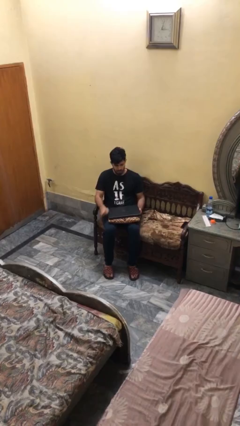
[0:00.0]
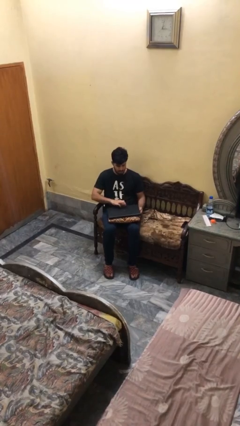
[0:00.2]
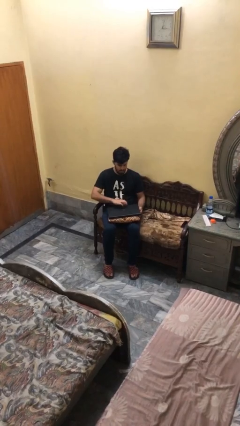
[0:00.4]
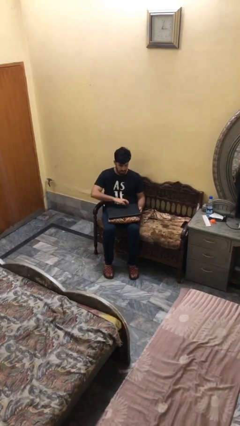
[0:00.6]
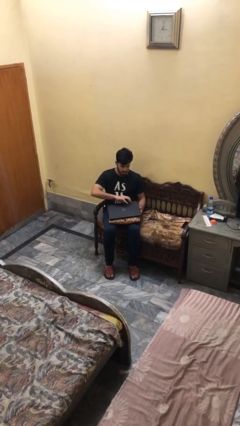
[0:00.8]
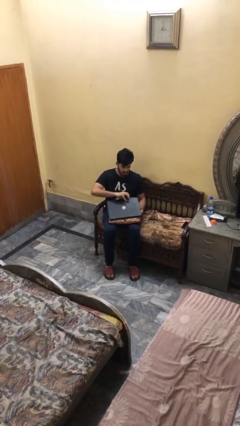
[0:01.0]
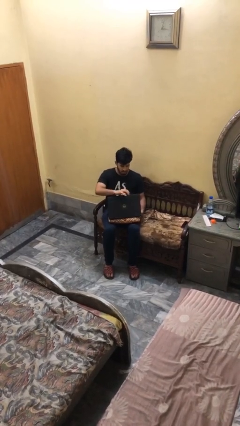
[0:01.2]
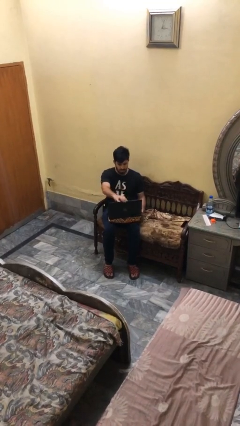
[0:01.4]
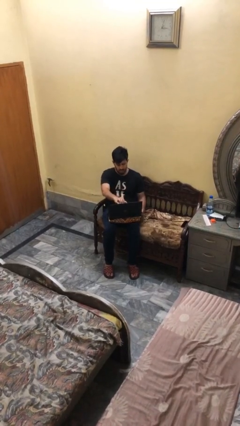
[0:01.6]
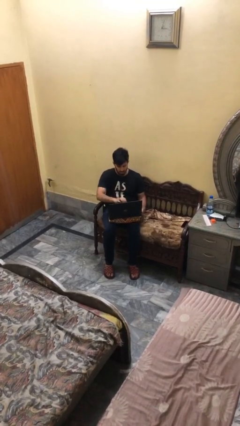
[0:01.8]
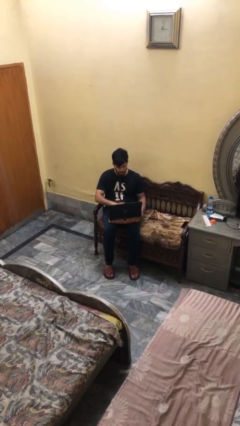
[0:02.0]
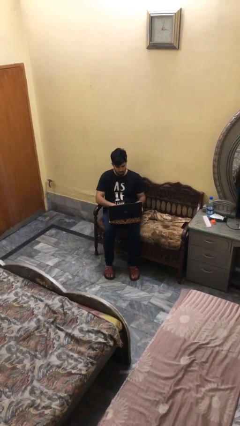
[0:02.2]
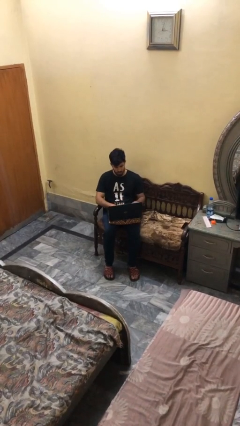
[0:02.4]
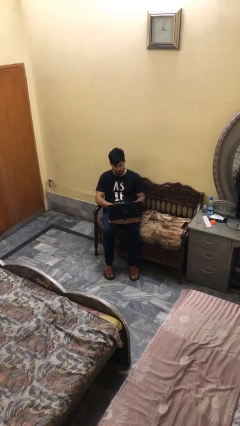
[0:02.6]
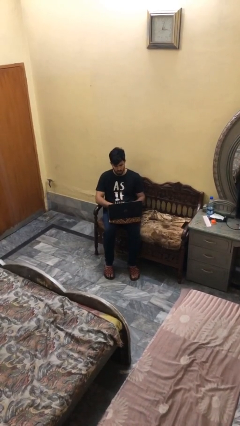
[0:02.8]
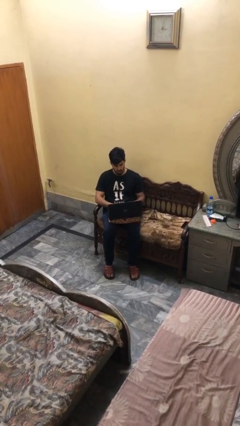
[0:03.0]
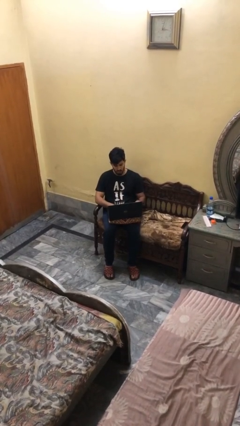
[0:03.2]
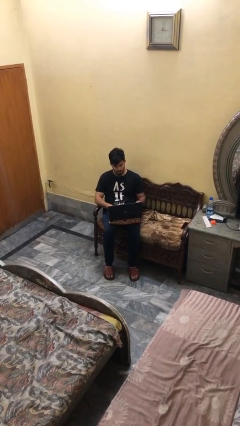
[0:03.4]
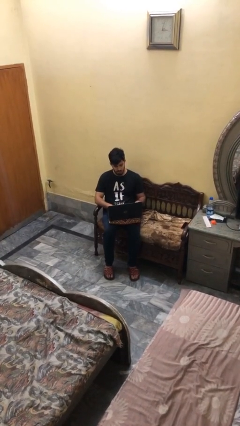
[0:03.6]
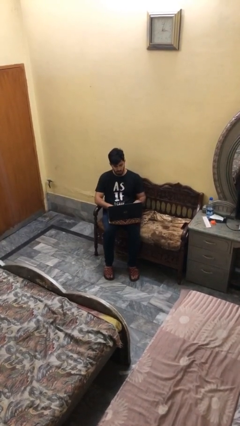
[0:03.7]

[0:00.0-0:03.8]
person opens laptop

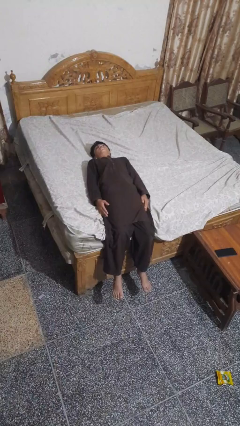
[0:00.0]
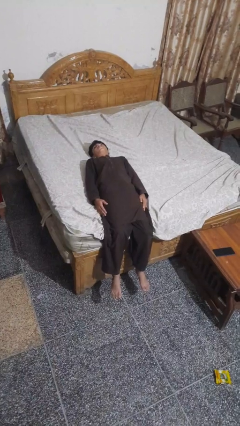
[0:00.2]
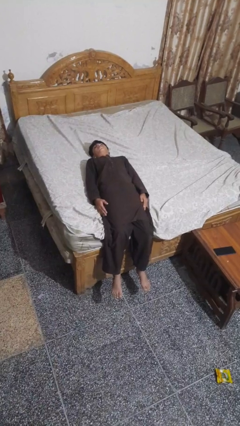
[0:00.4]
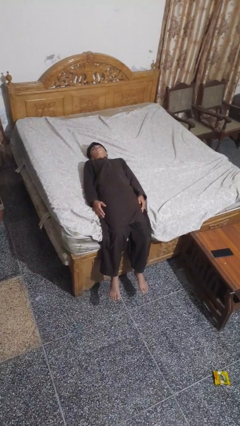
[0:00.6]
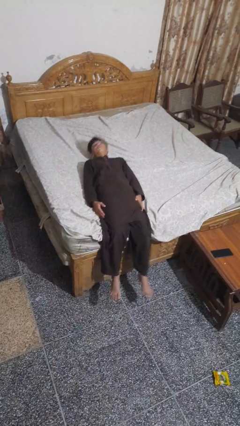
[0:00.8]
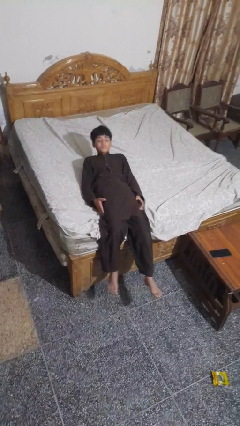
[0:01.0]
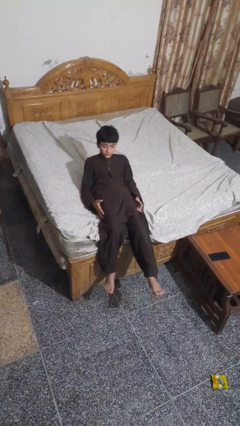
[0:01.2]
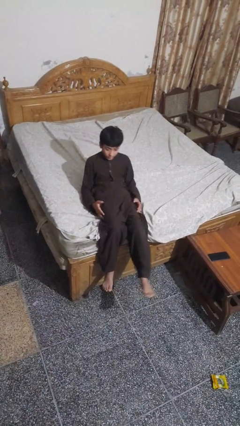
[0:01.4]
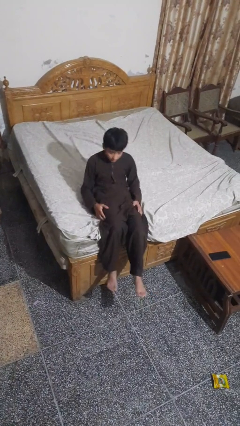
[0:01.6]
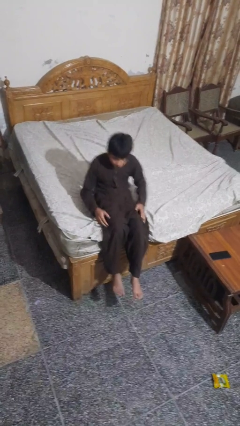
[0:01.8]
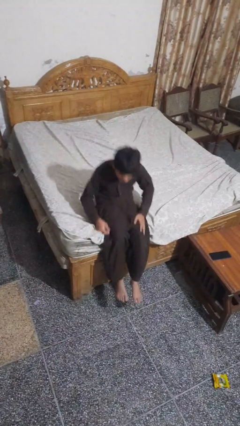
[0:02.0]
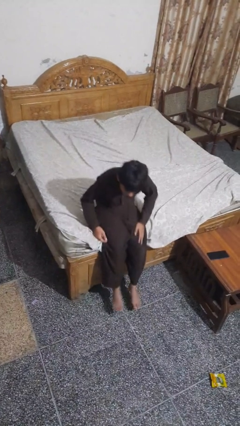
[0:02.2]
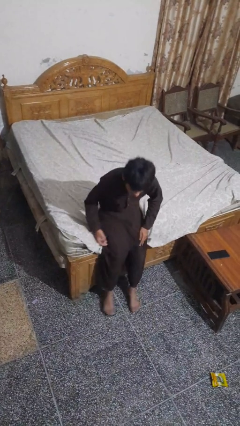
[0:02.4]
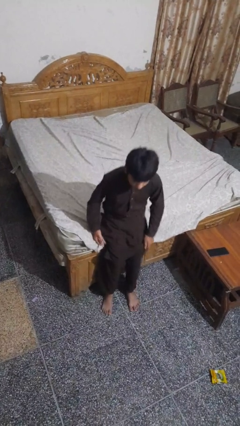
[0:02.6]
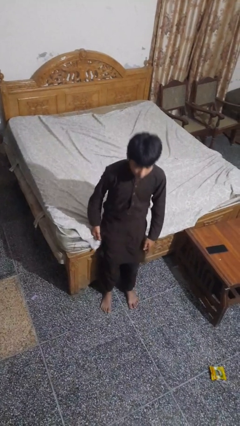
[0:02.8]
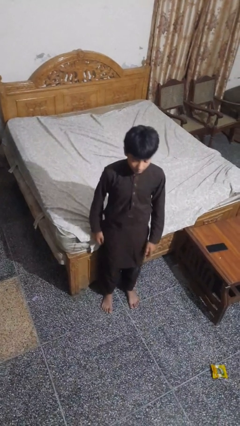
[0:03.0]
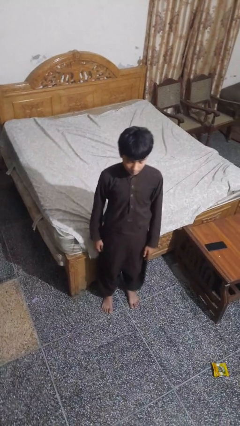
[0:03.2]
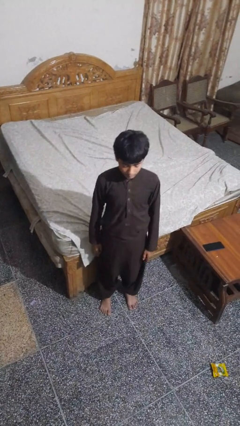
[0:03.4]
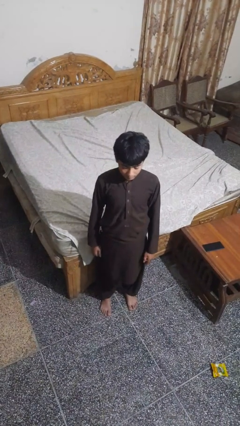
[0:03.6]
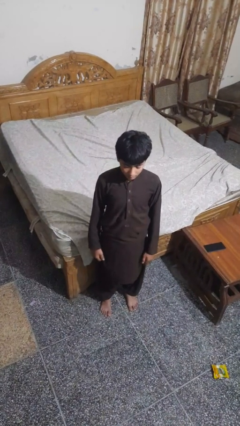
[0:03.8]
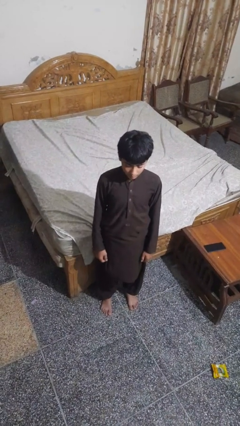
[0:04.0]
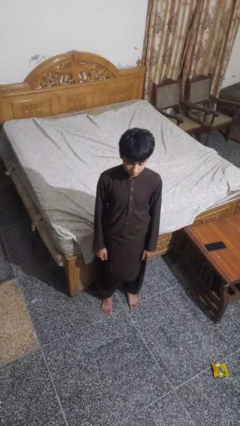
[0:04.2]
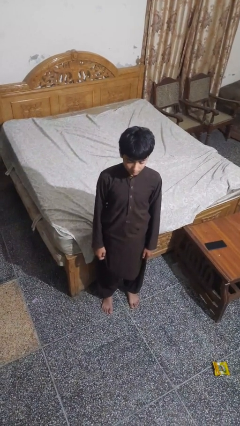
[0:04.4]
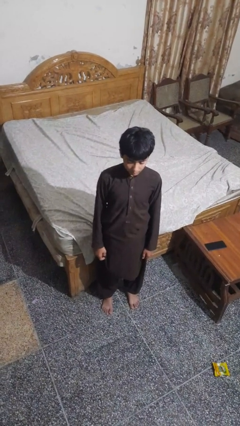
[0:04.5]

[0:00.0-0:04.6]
person stands up

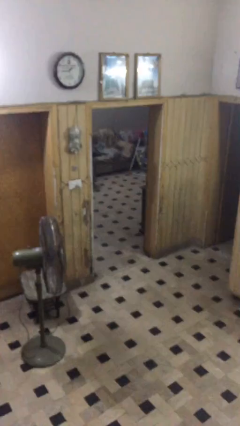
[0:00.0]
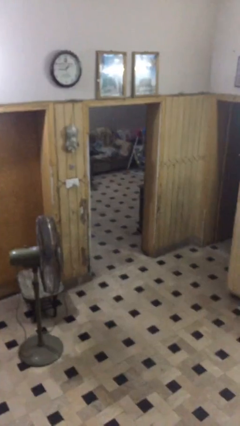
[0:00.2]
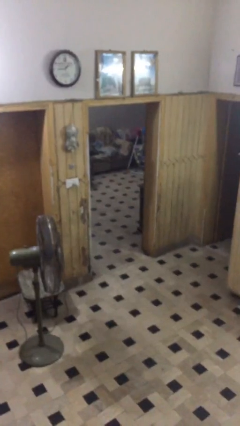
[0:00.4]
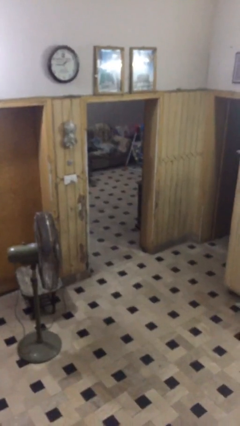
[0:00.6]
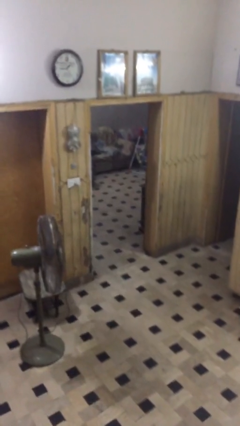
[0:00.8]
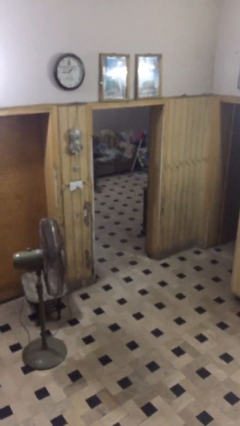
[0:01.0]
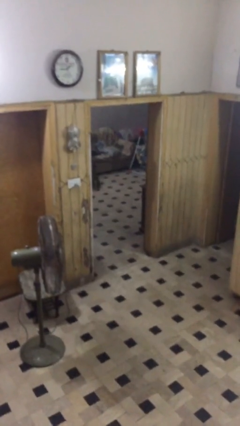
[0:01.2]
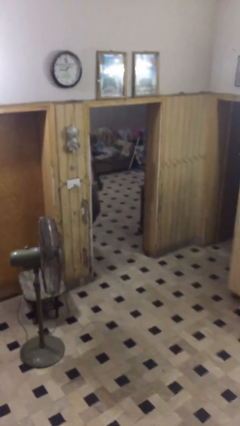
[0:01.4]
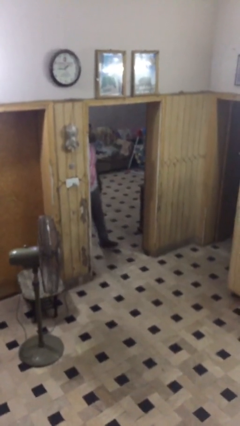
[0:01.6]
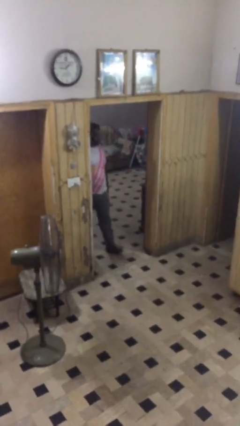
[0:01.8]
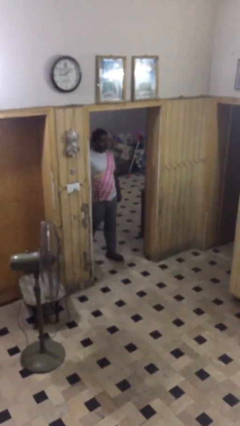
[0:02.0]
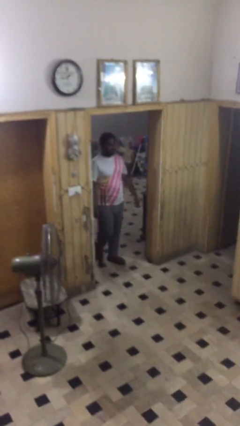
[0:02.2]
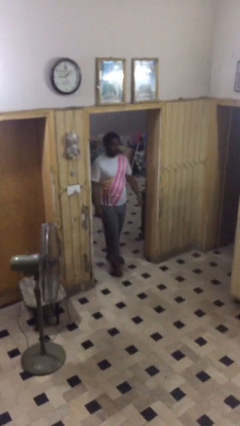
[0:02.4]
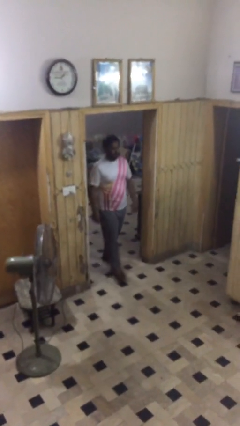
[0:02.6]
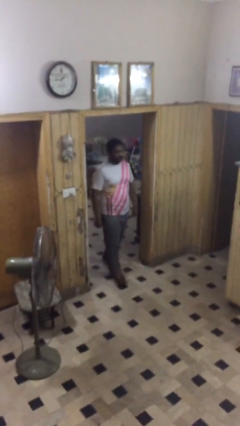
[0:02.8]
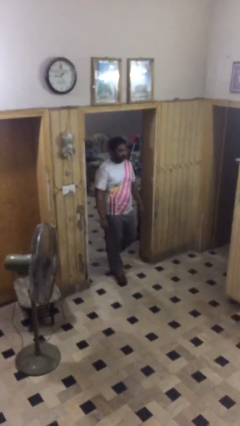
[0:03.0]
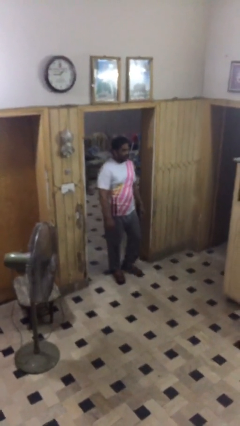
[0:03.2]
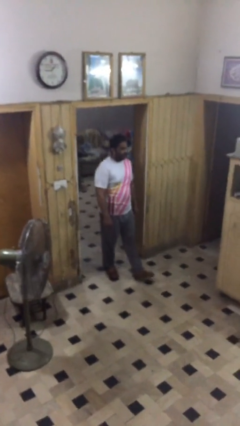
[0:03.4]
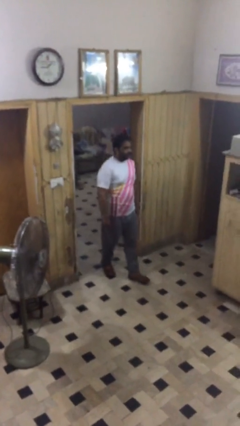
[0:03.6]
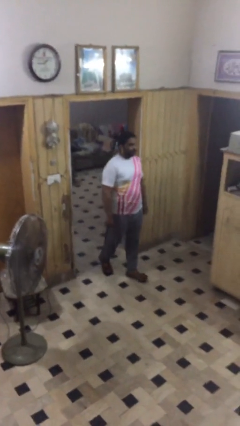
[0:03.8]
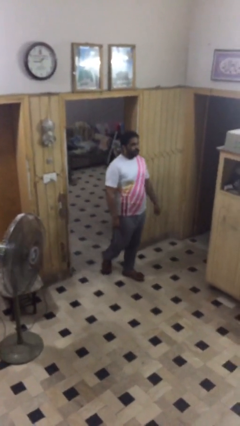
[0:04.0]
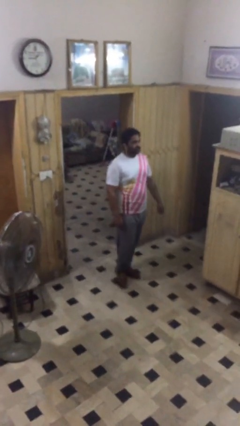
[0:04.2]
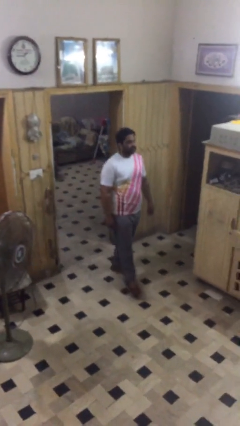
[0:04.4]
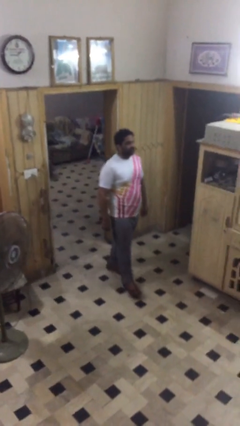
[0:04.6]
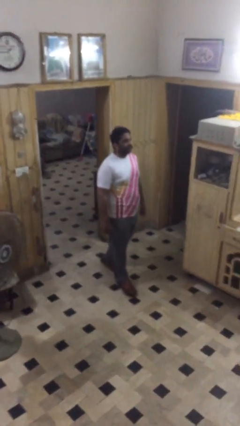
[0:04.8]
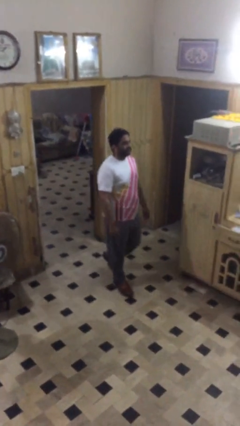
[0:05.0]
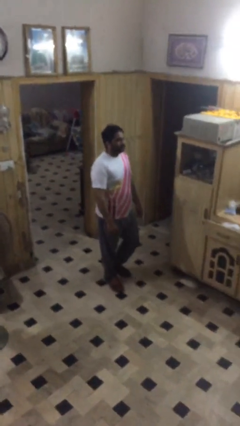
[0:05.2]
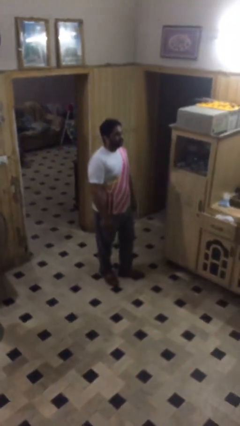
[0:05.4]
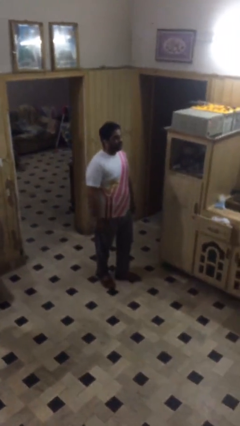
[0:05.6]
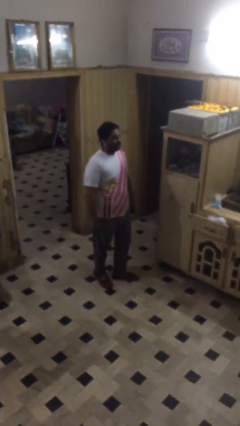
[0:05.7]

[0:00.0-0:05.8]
person enters scene through structure

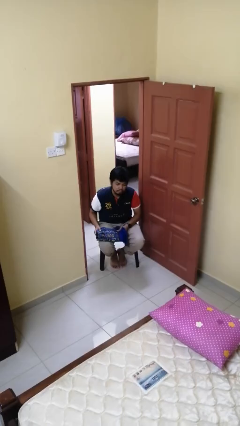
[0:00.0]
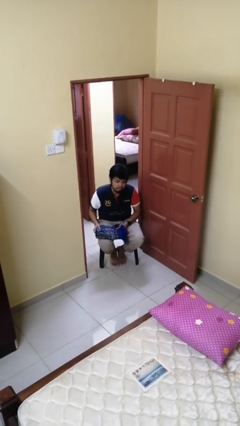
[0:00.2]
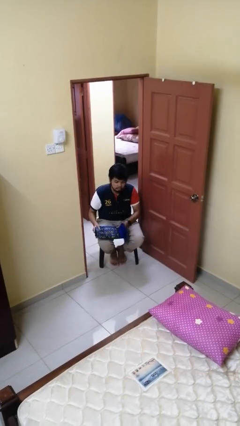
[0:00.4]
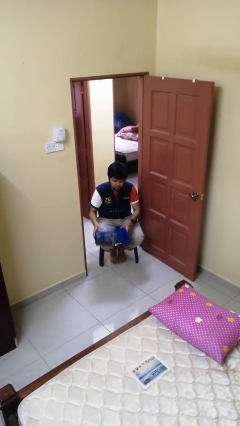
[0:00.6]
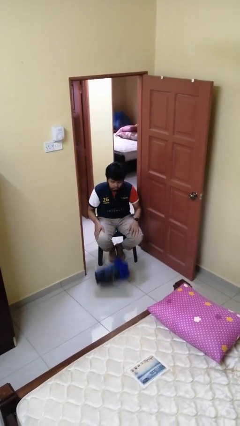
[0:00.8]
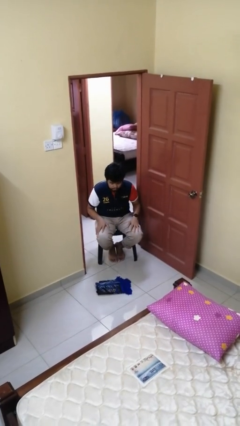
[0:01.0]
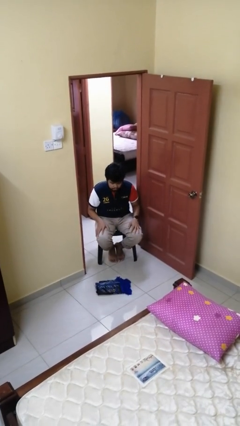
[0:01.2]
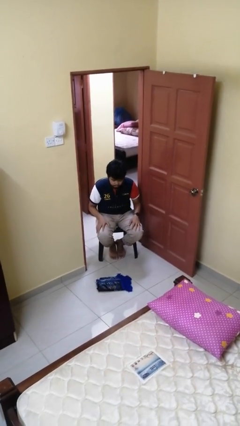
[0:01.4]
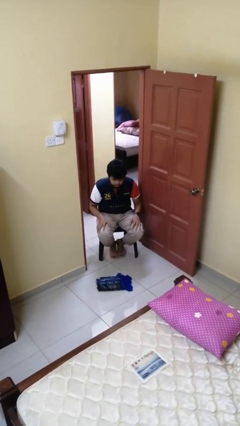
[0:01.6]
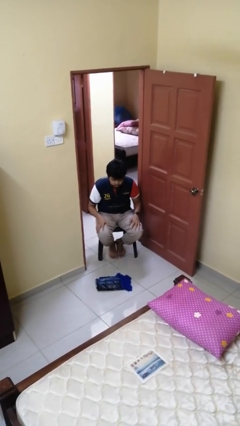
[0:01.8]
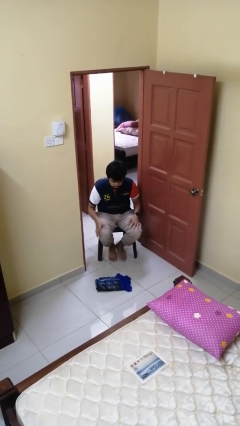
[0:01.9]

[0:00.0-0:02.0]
person drops object

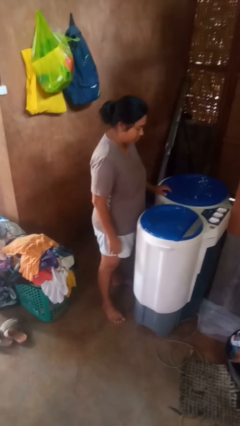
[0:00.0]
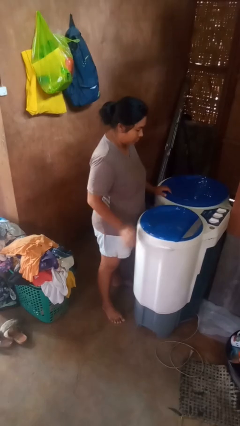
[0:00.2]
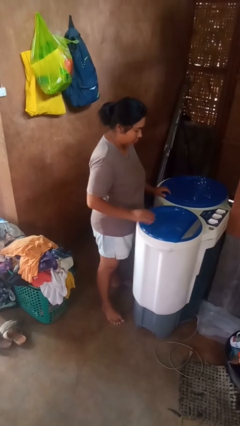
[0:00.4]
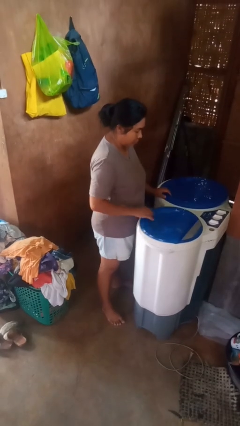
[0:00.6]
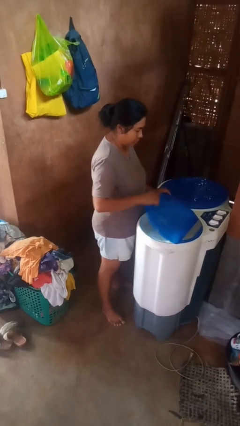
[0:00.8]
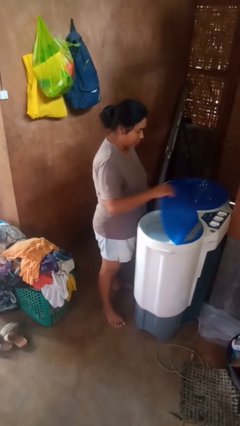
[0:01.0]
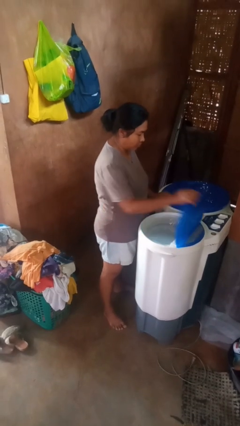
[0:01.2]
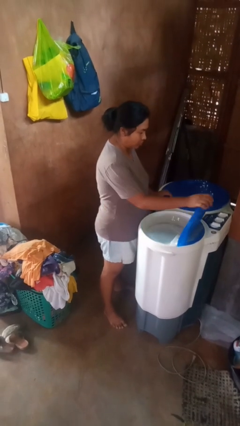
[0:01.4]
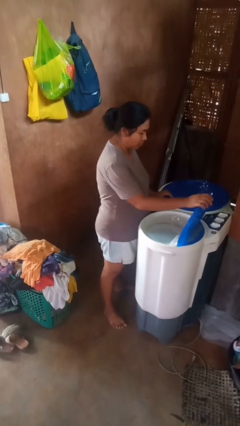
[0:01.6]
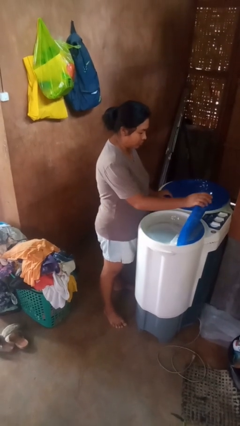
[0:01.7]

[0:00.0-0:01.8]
person opens clothes washer
